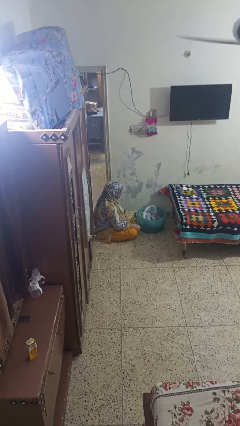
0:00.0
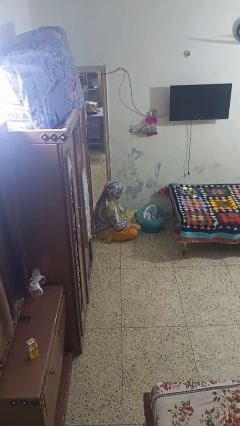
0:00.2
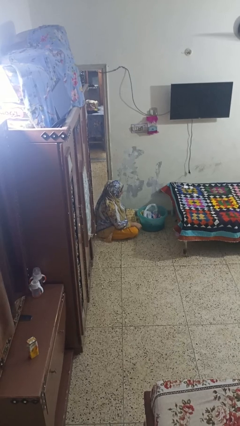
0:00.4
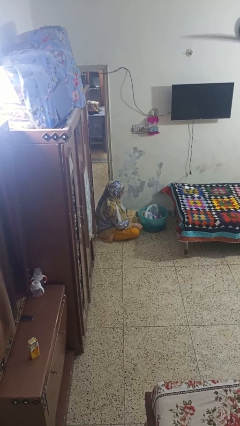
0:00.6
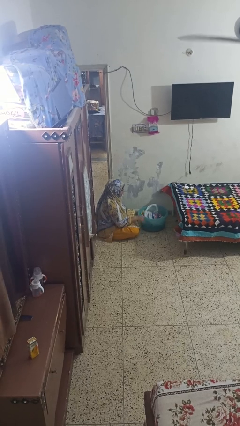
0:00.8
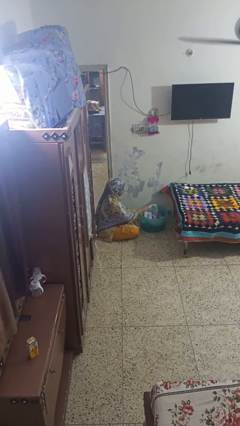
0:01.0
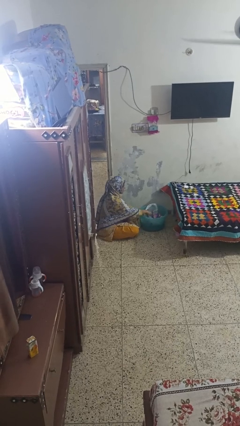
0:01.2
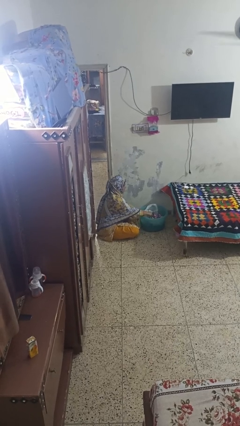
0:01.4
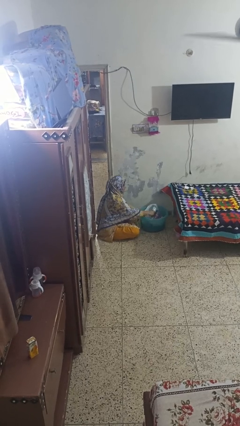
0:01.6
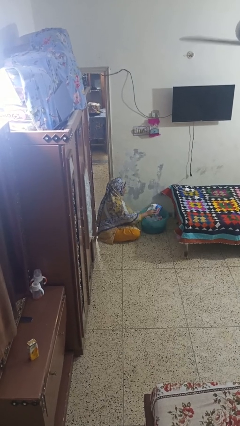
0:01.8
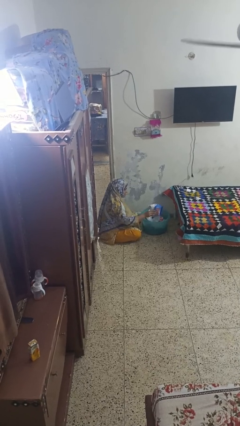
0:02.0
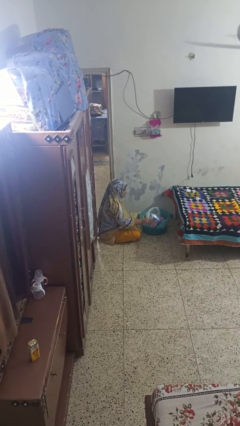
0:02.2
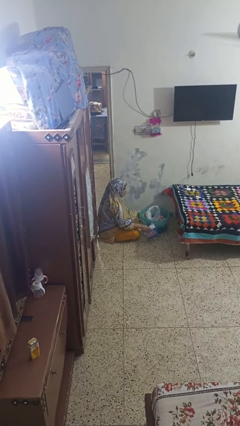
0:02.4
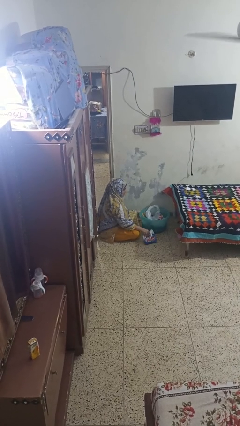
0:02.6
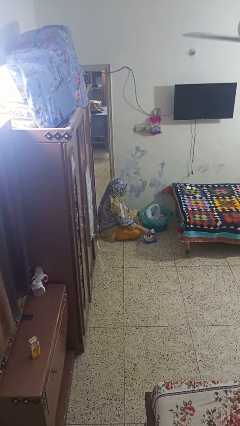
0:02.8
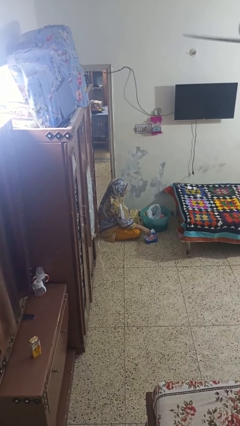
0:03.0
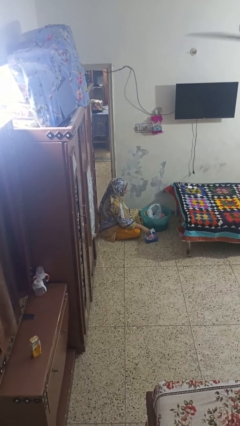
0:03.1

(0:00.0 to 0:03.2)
person takes object from basket

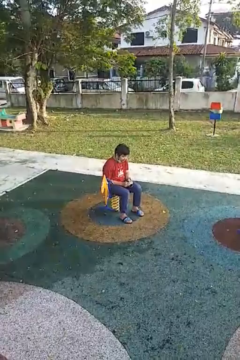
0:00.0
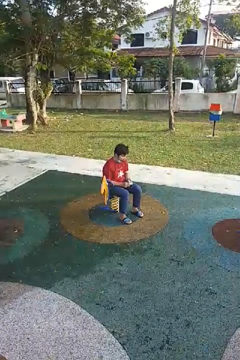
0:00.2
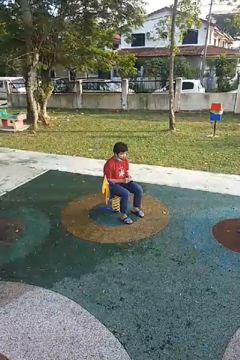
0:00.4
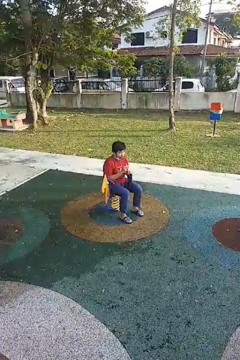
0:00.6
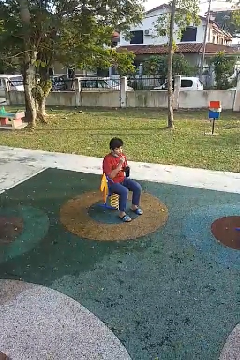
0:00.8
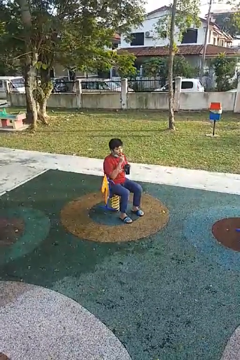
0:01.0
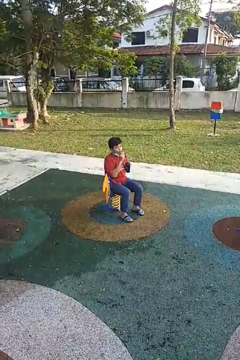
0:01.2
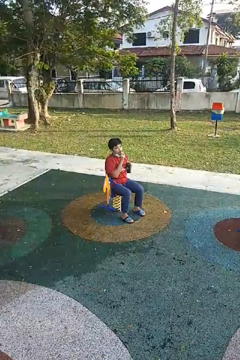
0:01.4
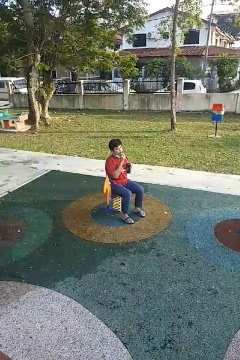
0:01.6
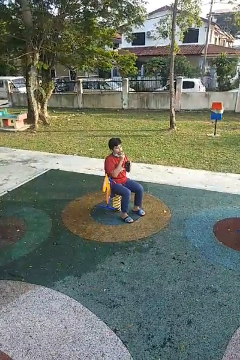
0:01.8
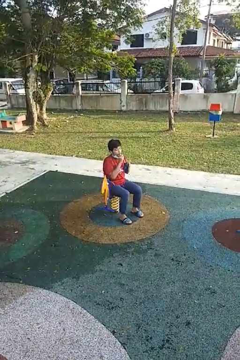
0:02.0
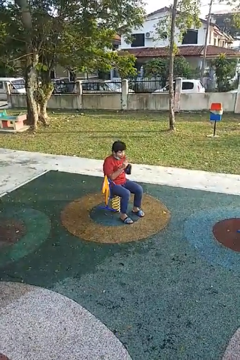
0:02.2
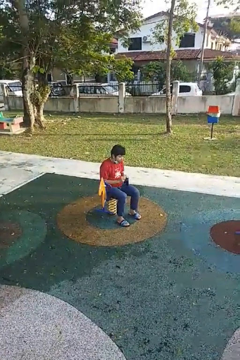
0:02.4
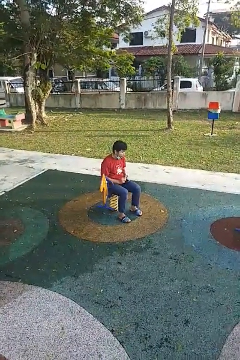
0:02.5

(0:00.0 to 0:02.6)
person drinks from straw

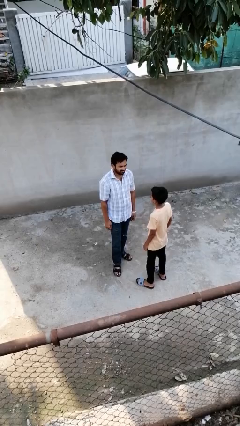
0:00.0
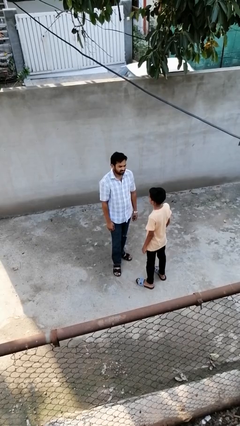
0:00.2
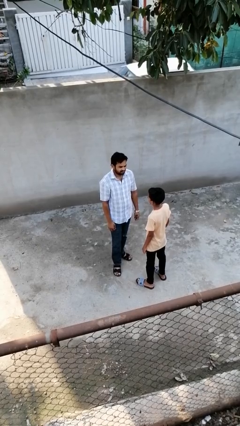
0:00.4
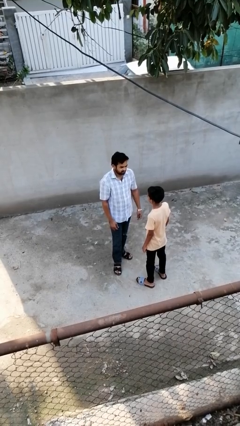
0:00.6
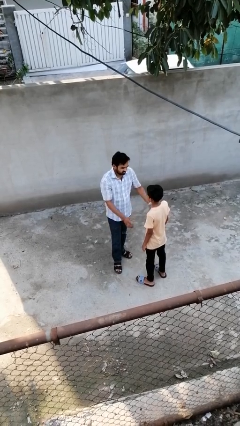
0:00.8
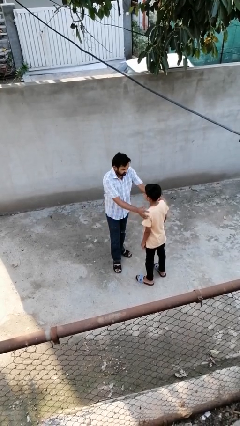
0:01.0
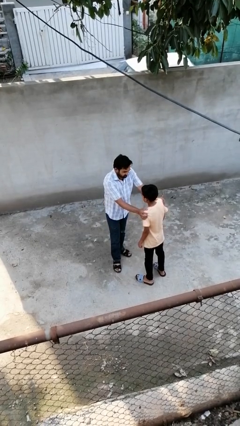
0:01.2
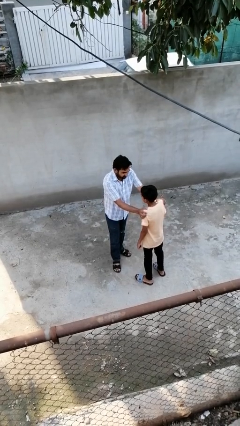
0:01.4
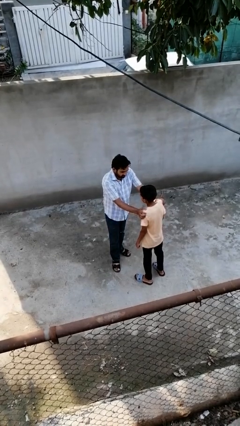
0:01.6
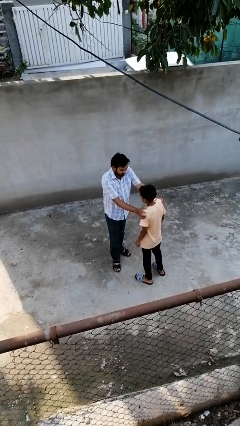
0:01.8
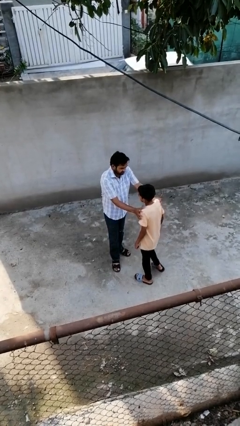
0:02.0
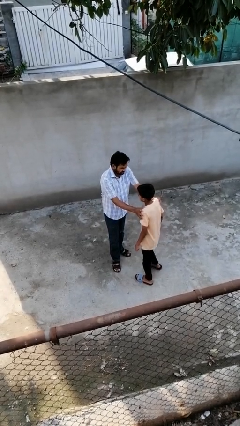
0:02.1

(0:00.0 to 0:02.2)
person grabs person by shoulder

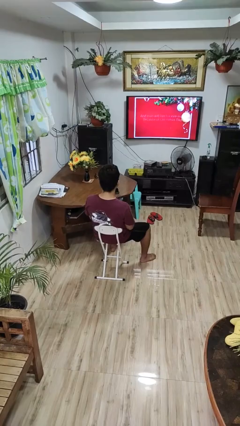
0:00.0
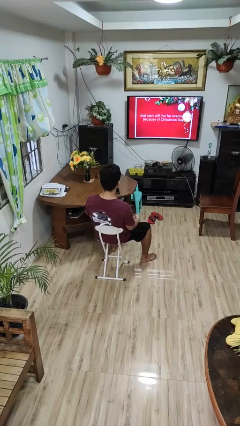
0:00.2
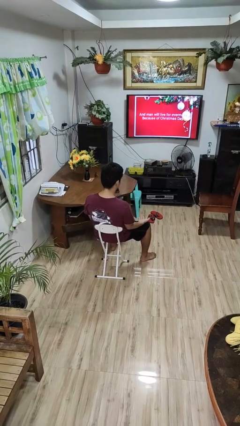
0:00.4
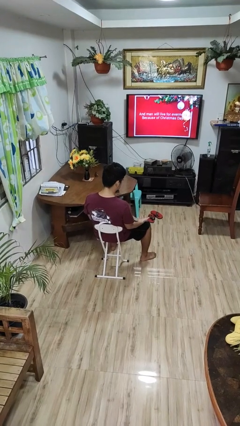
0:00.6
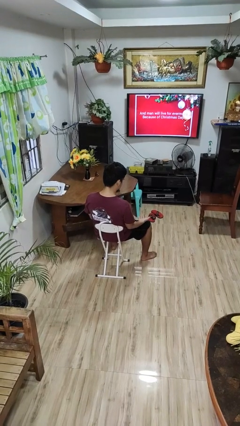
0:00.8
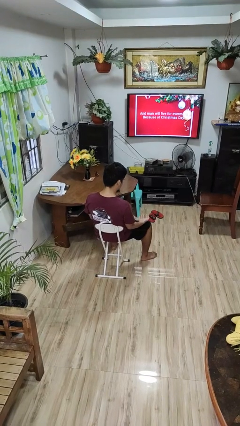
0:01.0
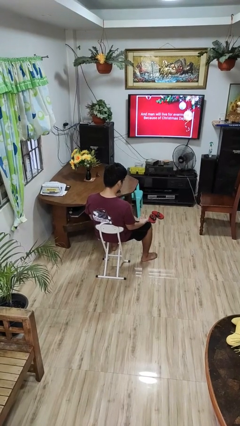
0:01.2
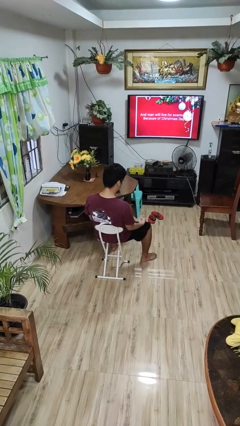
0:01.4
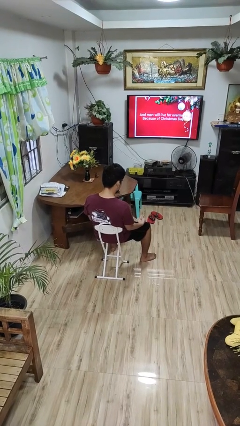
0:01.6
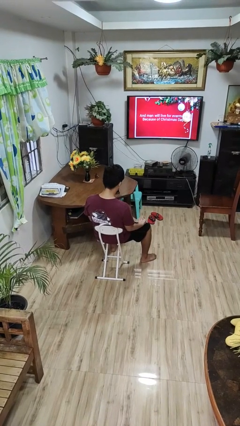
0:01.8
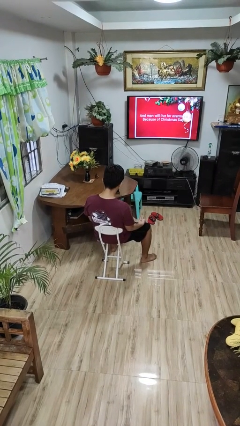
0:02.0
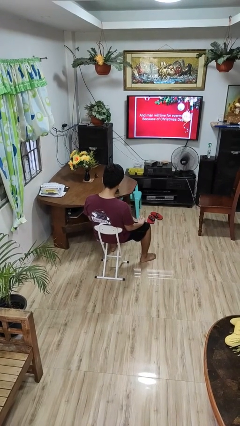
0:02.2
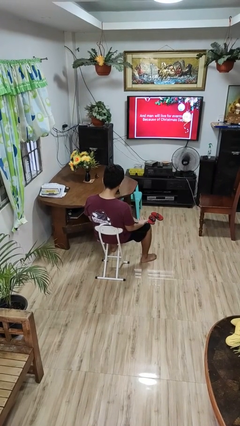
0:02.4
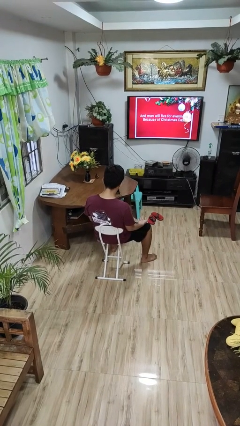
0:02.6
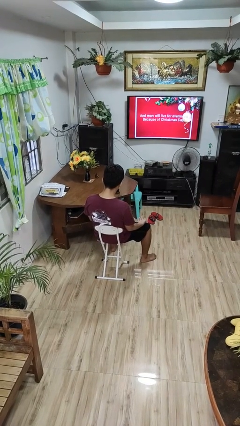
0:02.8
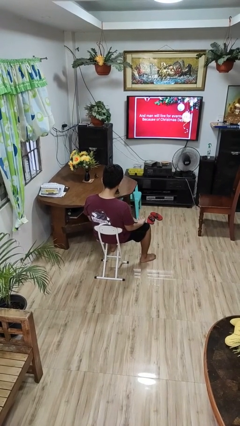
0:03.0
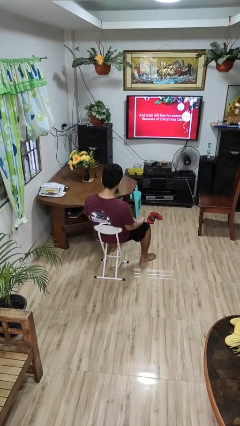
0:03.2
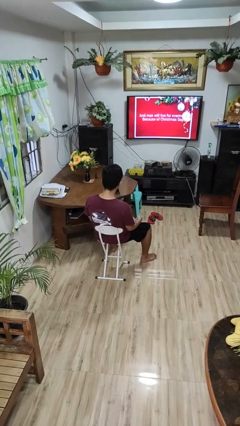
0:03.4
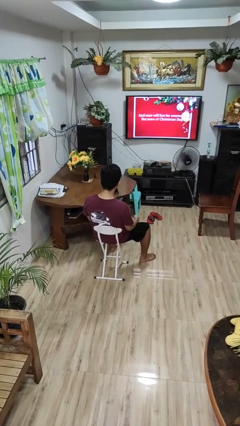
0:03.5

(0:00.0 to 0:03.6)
person looks at hands in lap

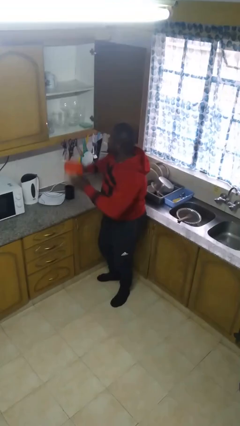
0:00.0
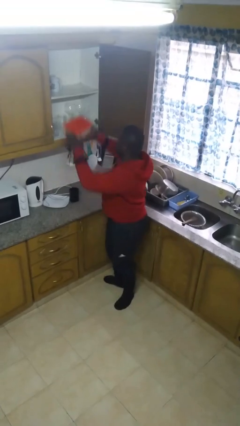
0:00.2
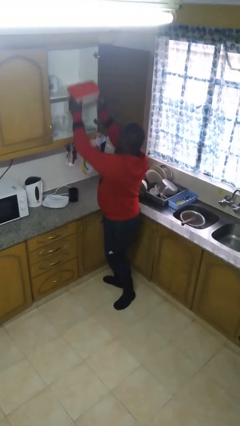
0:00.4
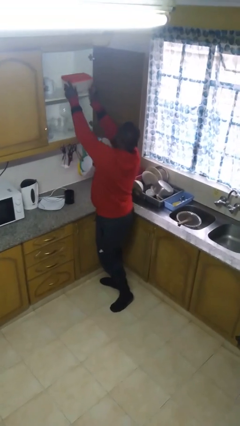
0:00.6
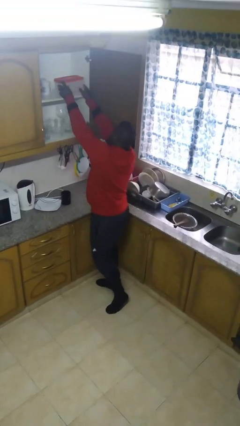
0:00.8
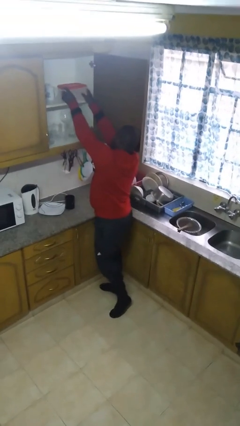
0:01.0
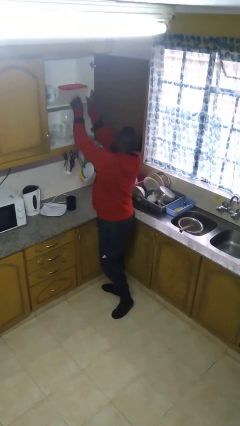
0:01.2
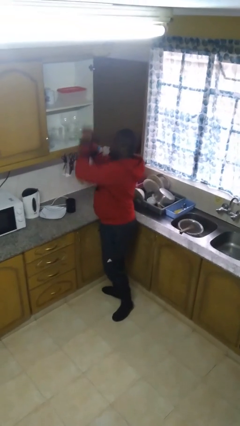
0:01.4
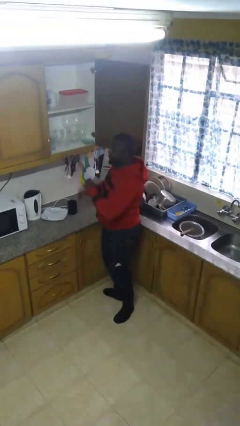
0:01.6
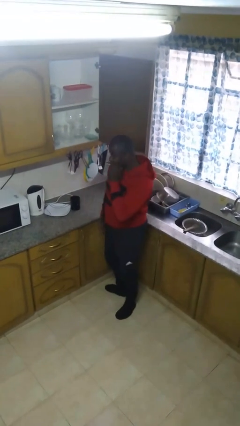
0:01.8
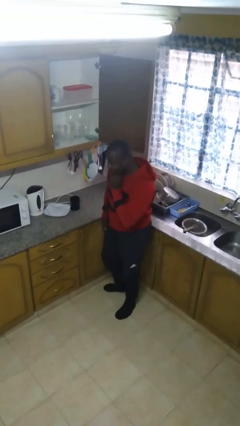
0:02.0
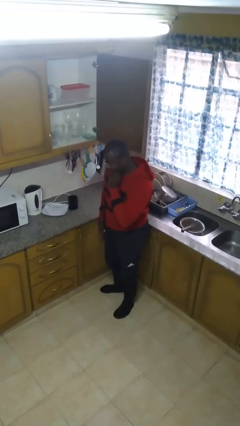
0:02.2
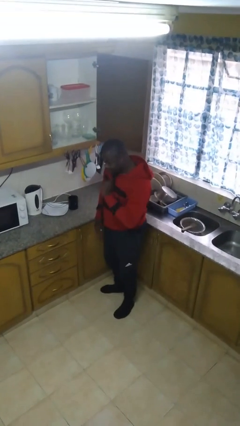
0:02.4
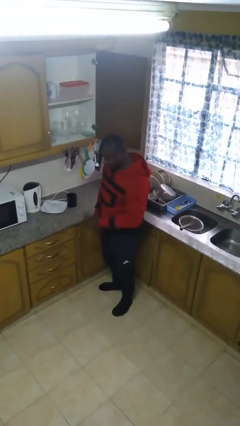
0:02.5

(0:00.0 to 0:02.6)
person puts down object into cabinet

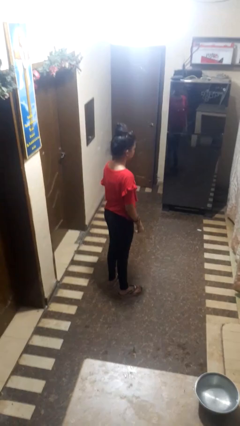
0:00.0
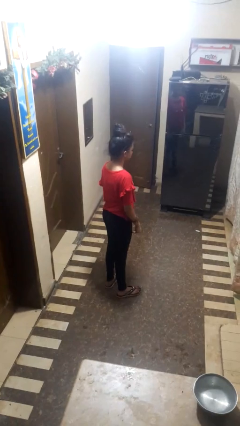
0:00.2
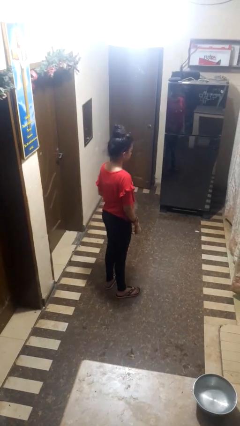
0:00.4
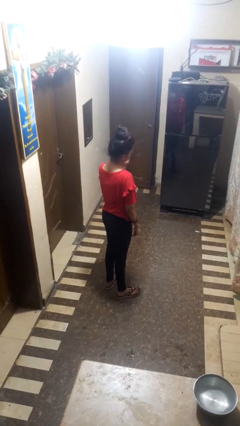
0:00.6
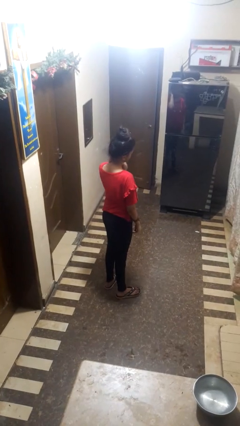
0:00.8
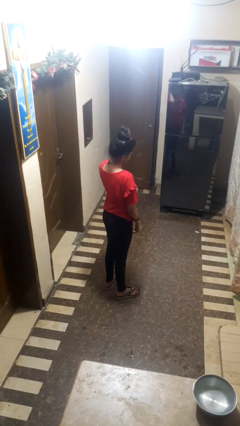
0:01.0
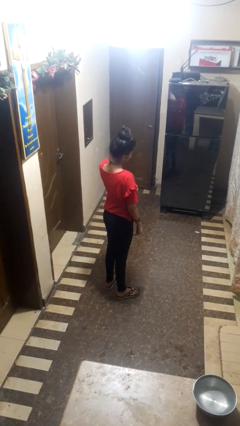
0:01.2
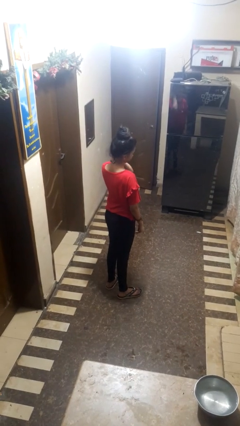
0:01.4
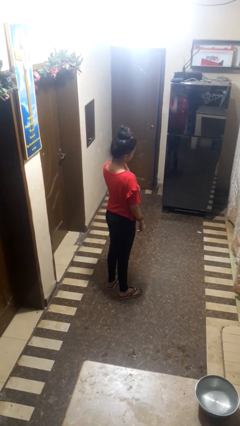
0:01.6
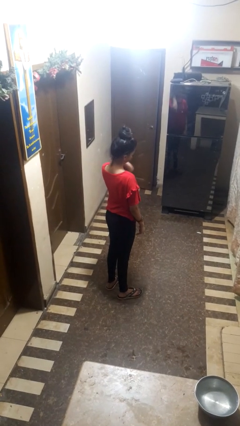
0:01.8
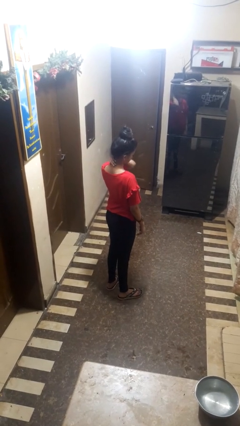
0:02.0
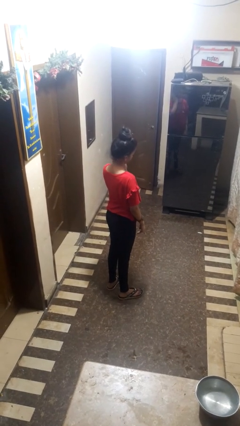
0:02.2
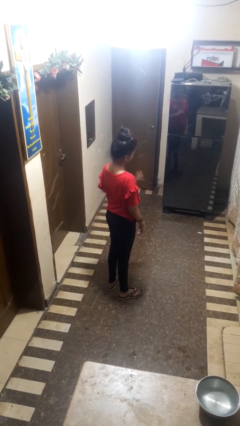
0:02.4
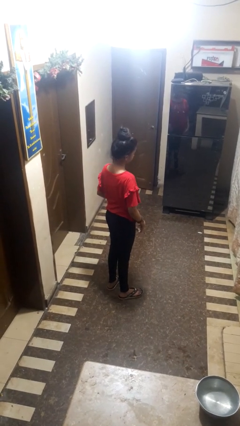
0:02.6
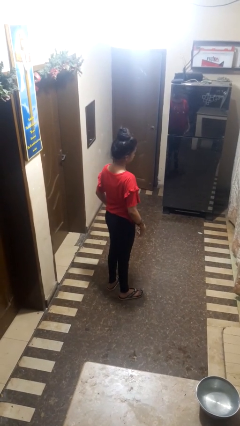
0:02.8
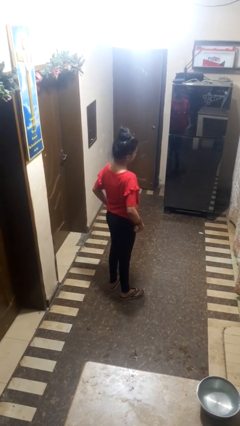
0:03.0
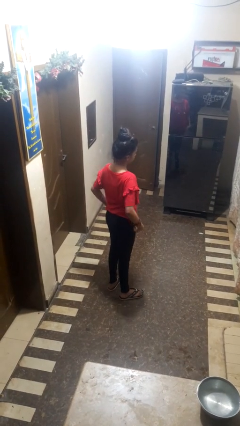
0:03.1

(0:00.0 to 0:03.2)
person rubs neck

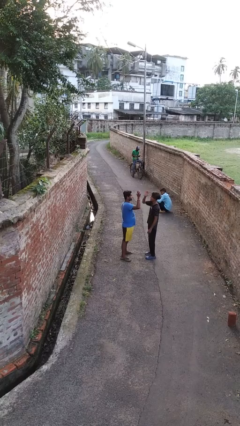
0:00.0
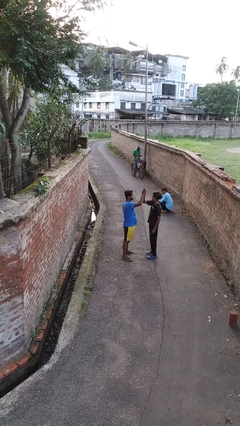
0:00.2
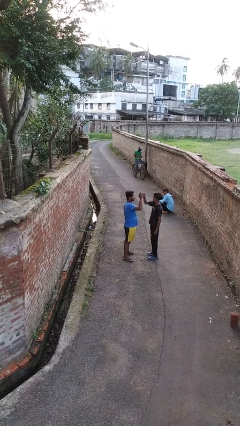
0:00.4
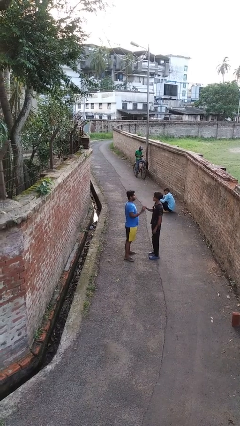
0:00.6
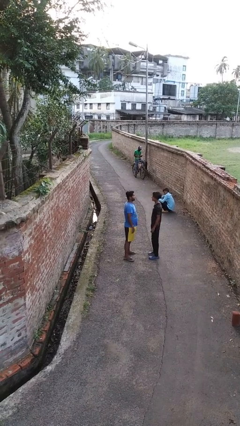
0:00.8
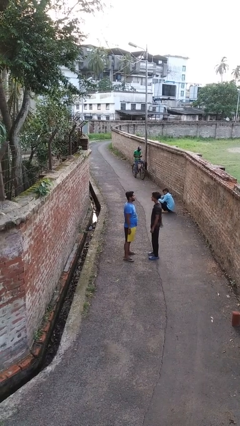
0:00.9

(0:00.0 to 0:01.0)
person highfives hand
